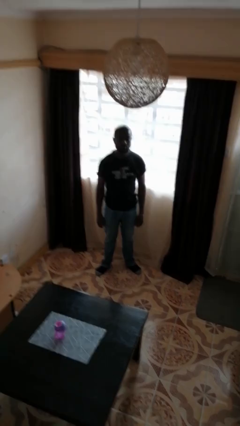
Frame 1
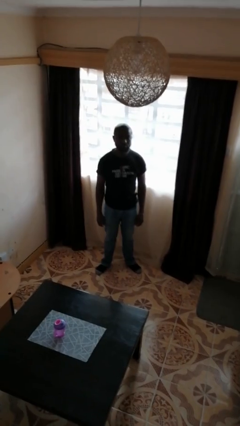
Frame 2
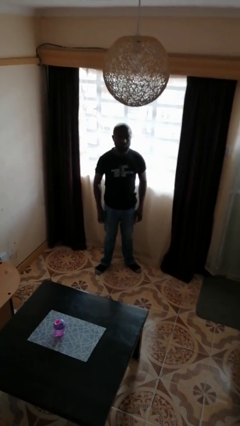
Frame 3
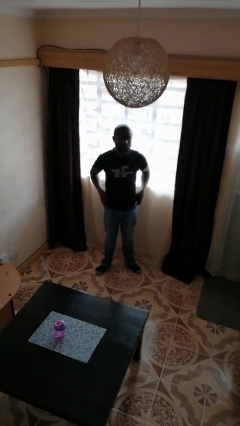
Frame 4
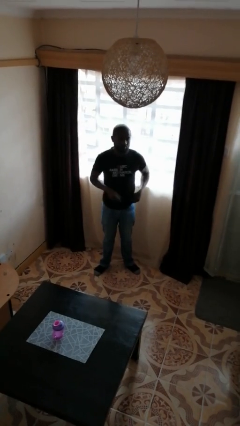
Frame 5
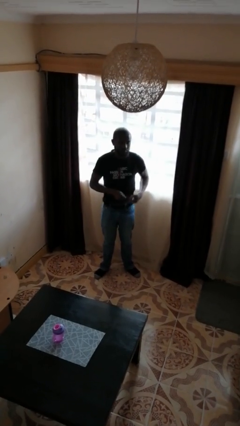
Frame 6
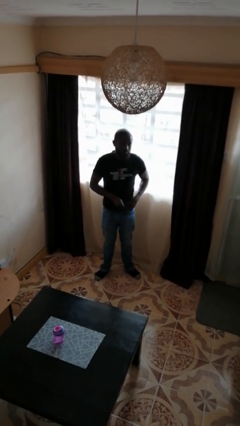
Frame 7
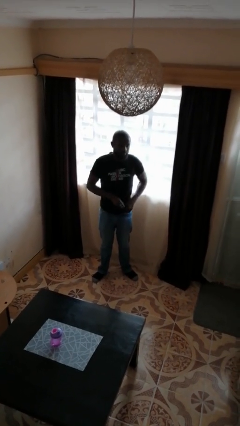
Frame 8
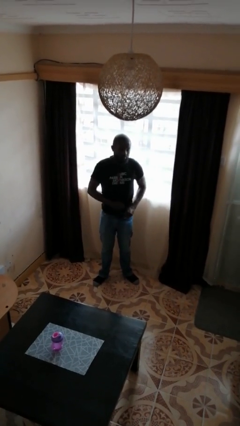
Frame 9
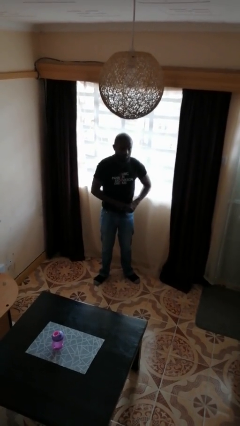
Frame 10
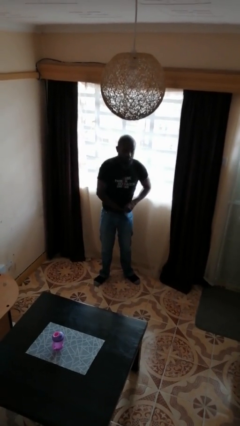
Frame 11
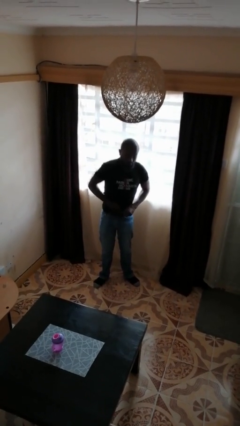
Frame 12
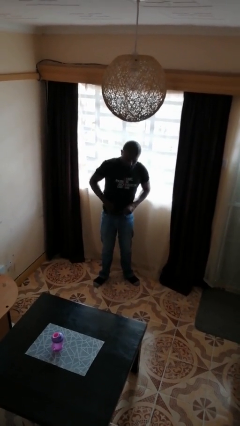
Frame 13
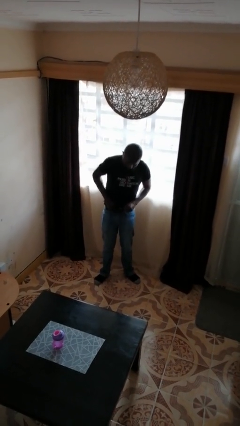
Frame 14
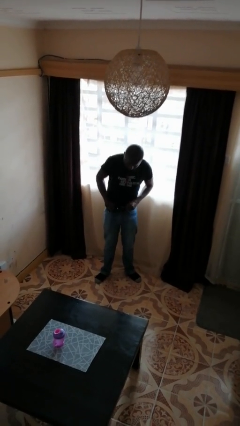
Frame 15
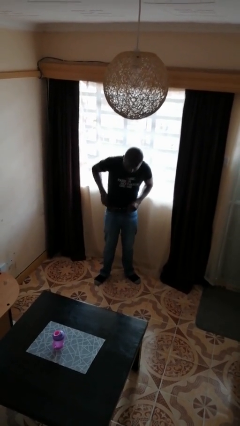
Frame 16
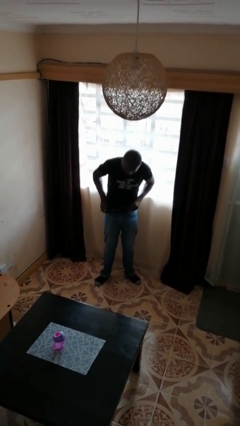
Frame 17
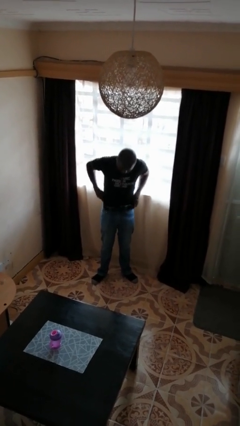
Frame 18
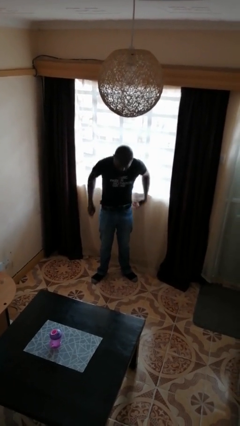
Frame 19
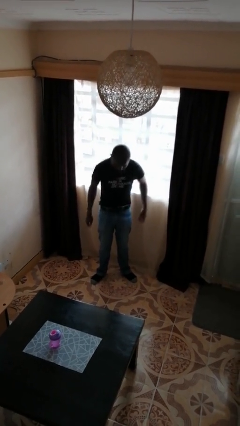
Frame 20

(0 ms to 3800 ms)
person tucks in shirt

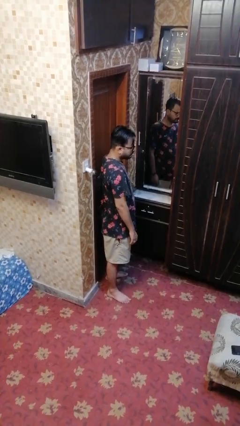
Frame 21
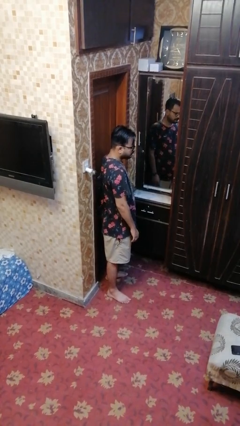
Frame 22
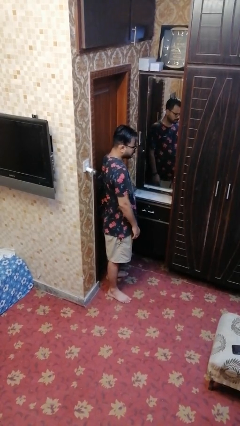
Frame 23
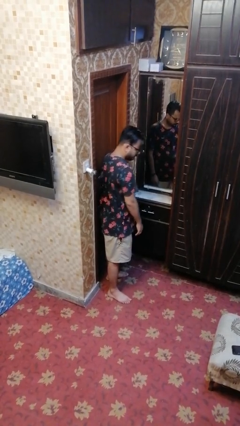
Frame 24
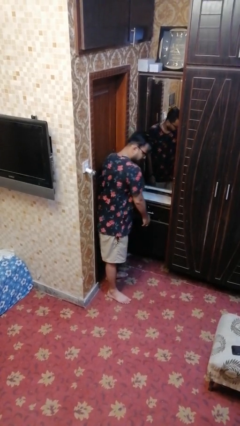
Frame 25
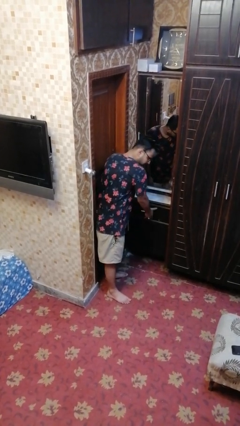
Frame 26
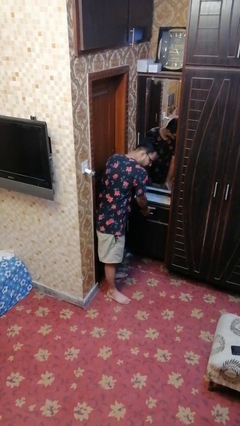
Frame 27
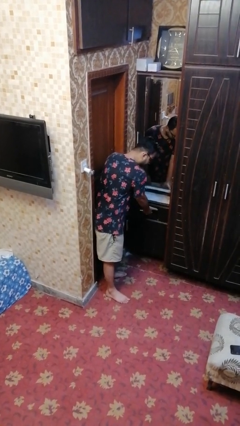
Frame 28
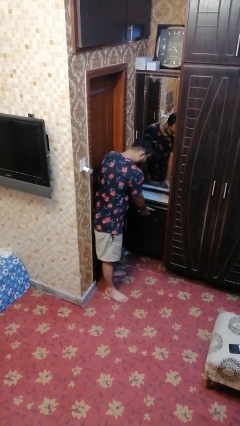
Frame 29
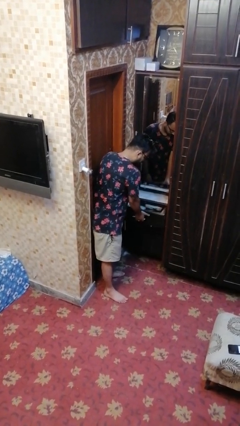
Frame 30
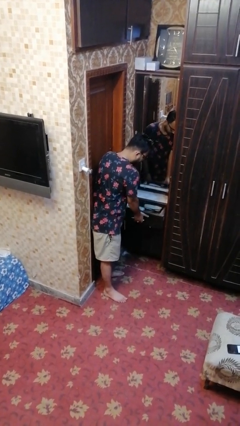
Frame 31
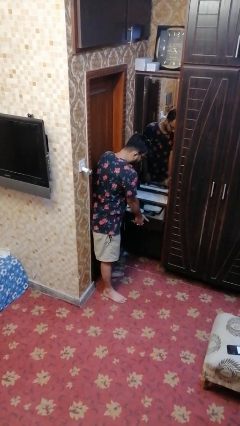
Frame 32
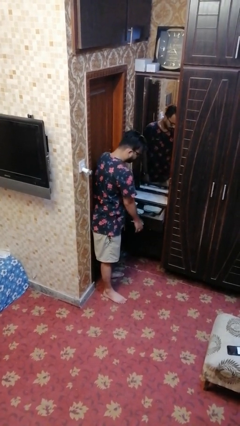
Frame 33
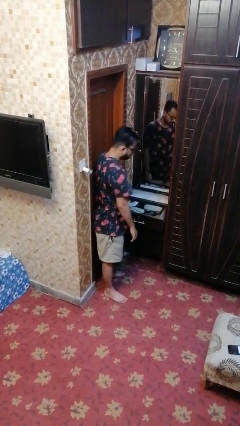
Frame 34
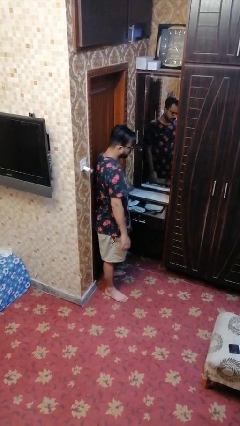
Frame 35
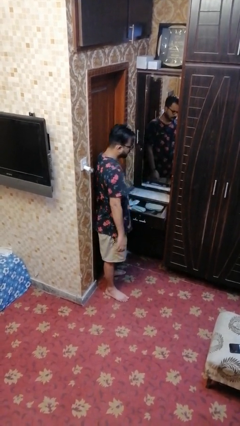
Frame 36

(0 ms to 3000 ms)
person opens dresser drawer

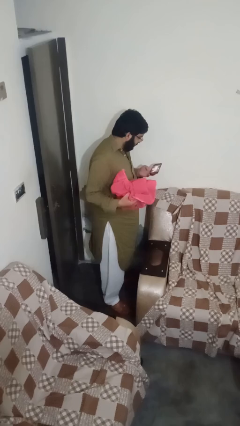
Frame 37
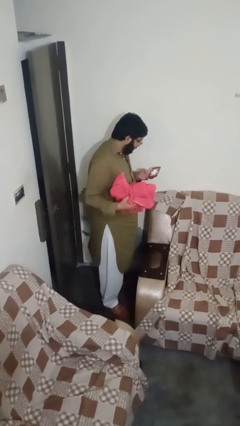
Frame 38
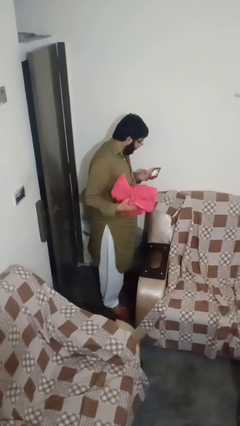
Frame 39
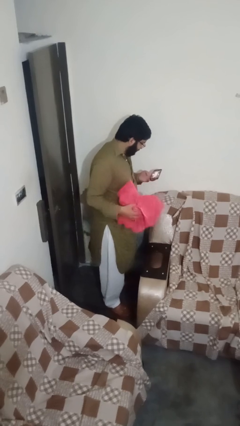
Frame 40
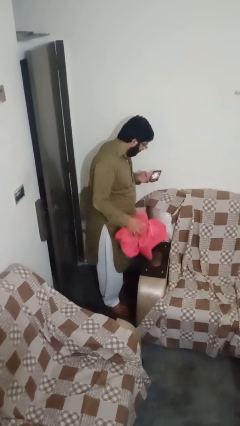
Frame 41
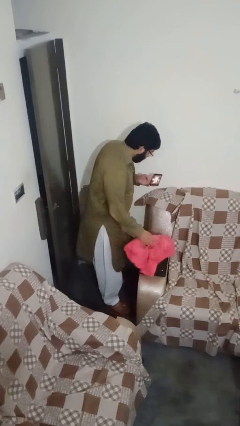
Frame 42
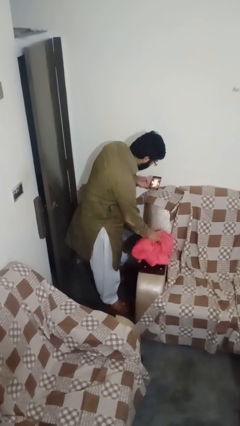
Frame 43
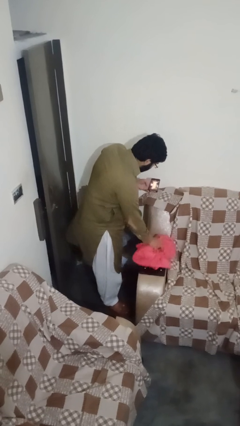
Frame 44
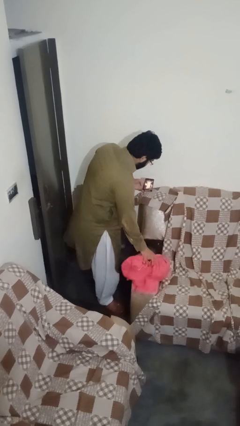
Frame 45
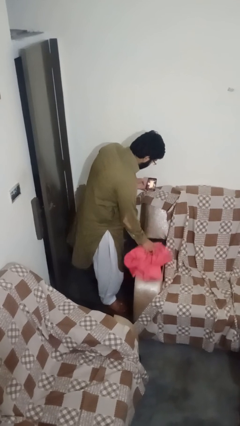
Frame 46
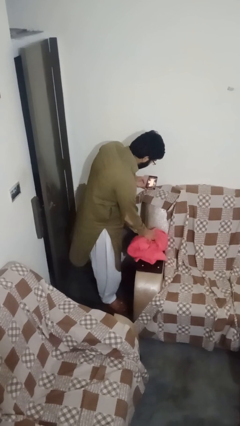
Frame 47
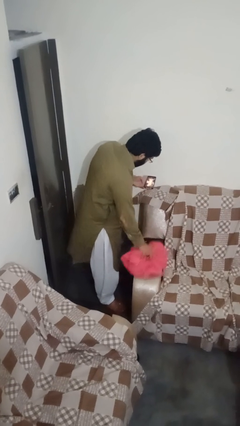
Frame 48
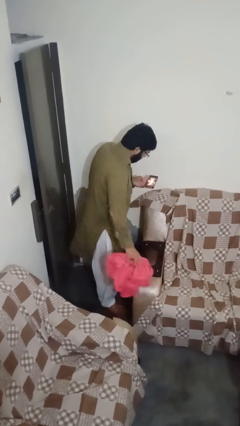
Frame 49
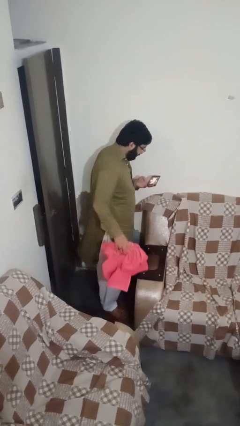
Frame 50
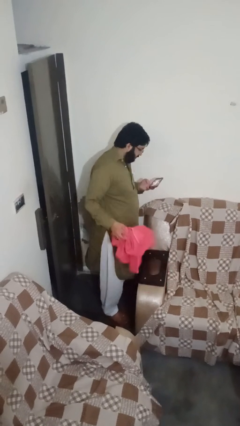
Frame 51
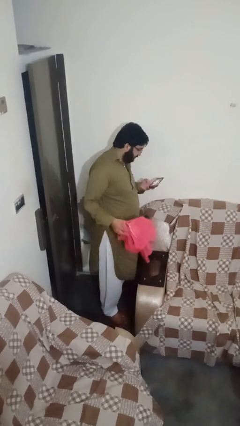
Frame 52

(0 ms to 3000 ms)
person dusts furniture

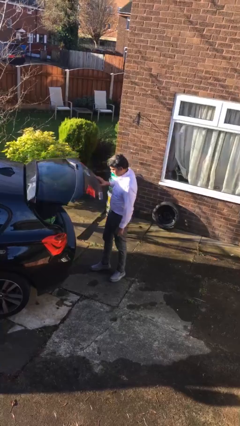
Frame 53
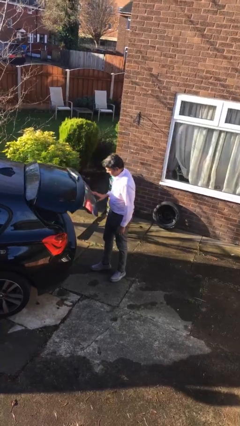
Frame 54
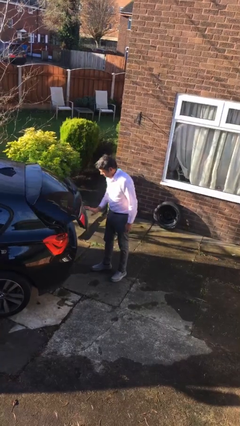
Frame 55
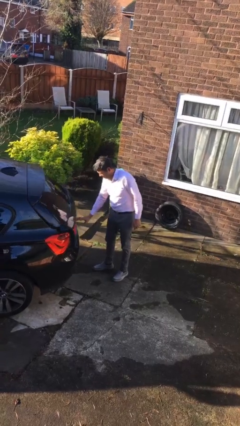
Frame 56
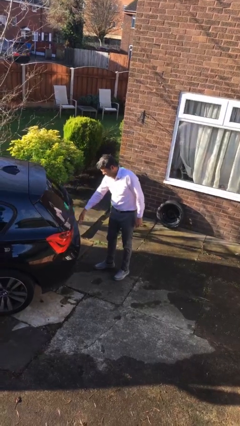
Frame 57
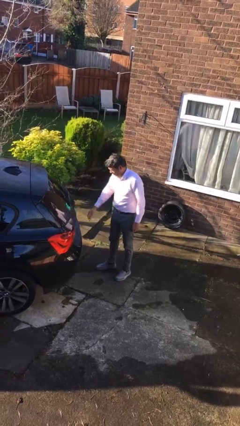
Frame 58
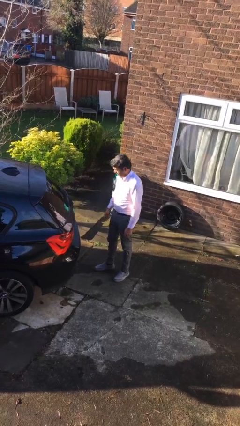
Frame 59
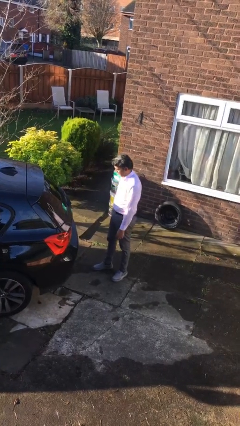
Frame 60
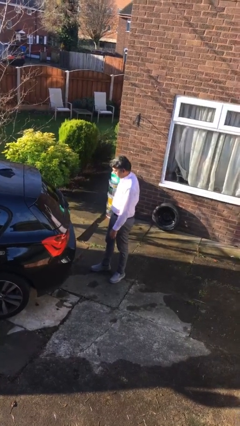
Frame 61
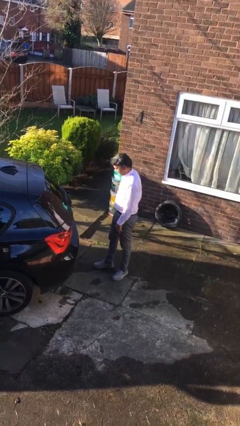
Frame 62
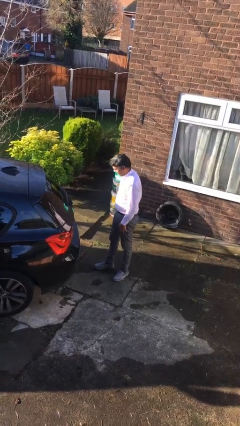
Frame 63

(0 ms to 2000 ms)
person closes car trunk

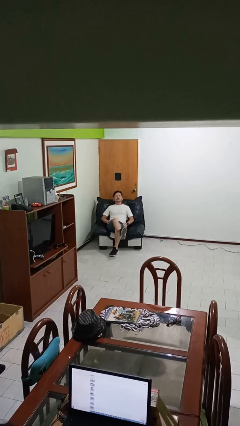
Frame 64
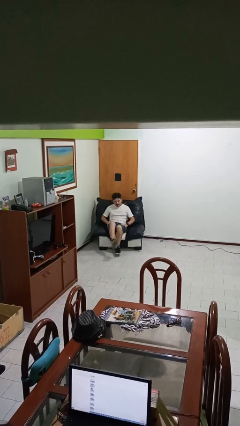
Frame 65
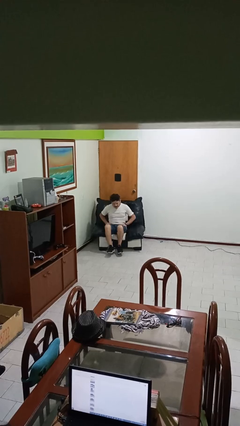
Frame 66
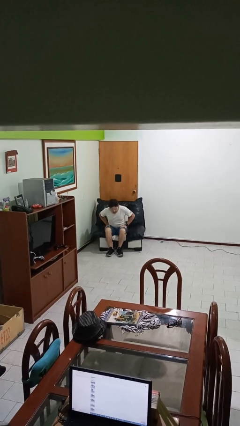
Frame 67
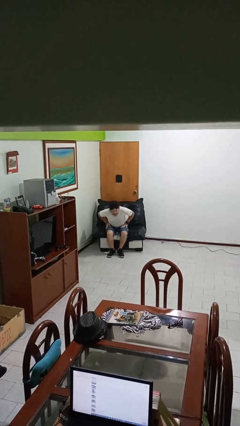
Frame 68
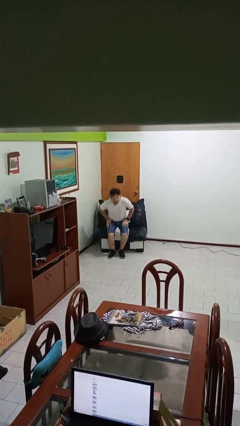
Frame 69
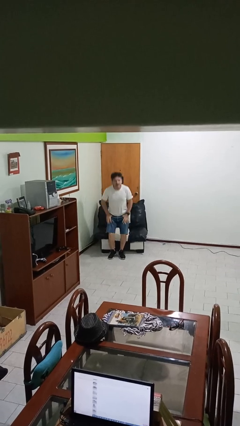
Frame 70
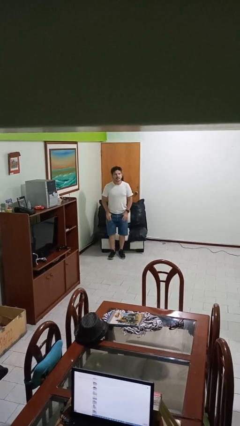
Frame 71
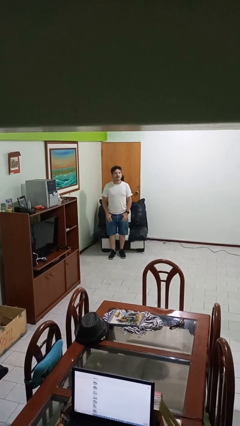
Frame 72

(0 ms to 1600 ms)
person stands up

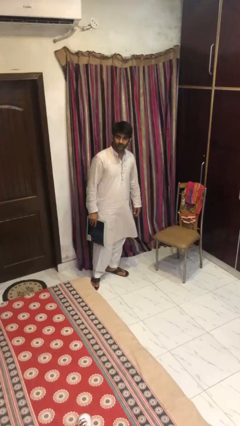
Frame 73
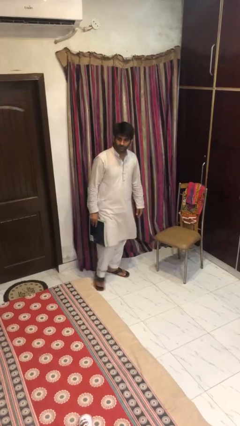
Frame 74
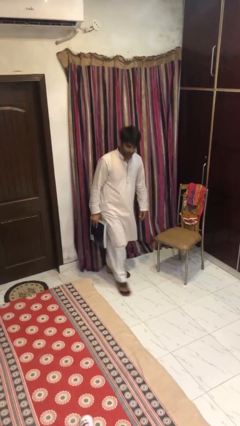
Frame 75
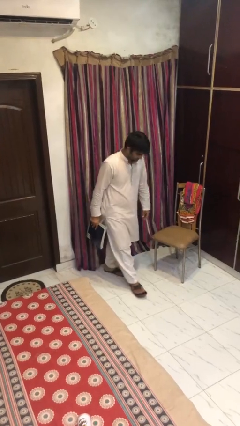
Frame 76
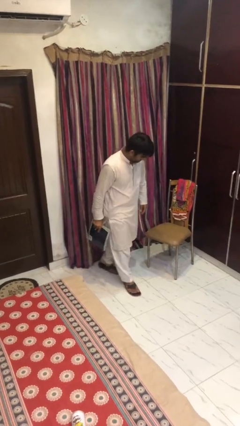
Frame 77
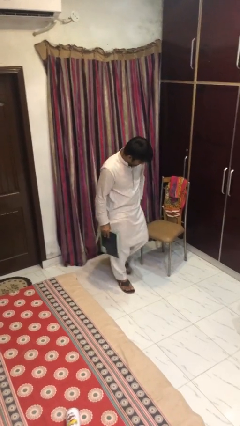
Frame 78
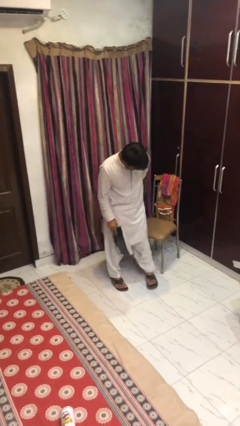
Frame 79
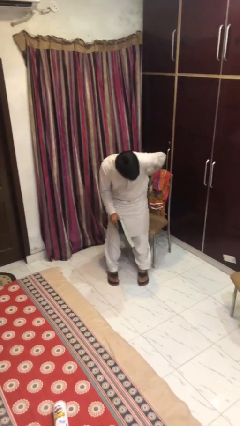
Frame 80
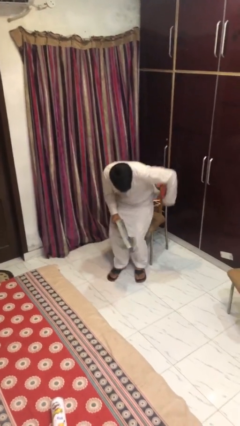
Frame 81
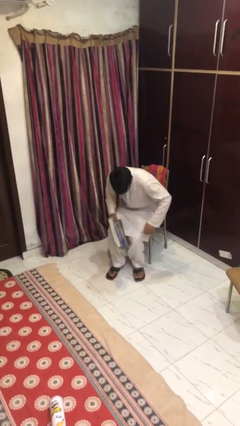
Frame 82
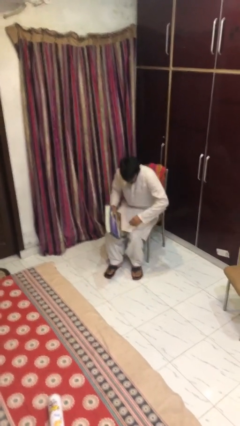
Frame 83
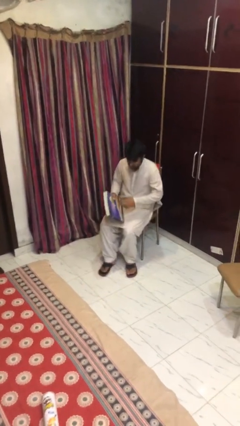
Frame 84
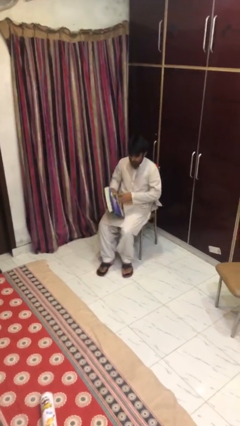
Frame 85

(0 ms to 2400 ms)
person sits down

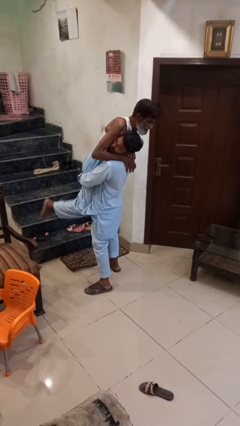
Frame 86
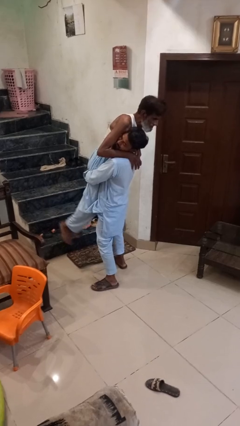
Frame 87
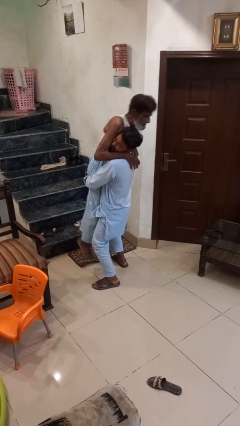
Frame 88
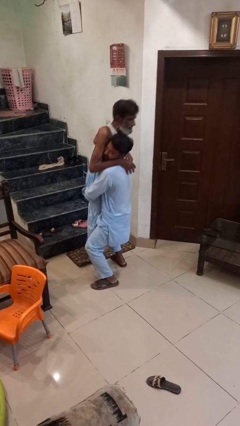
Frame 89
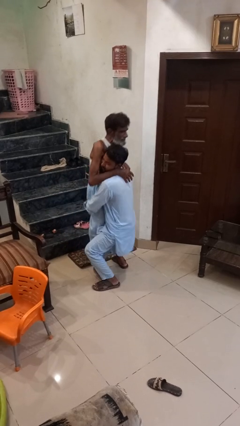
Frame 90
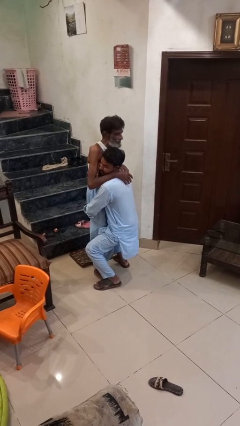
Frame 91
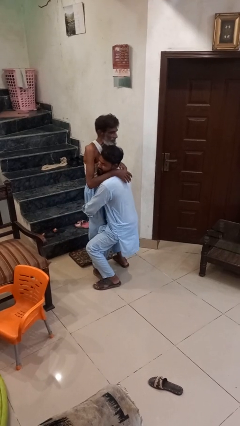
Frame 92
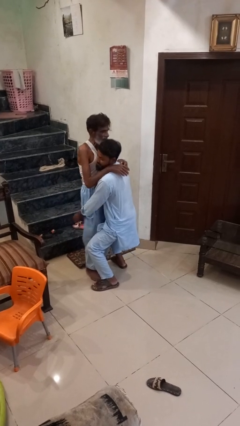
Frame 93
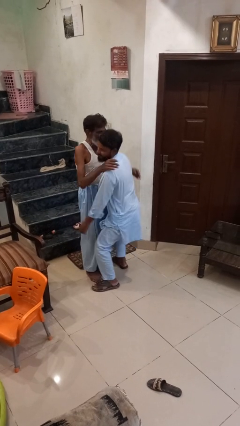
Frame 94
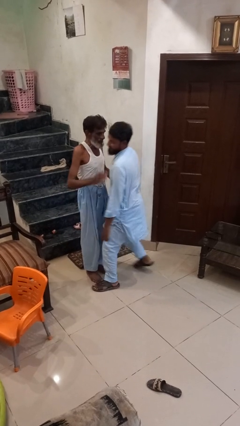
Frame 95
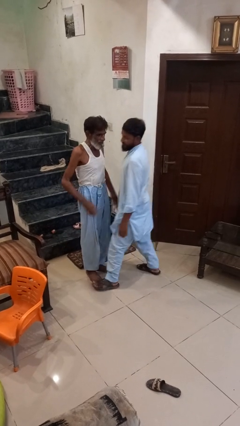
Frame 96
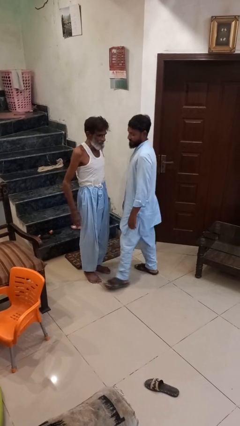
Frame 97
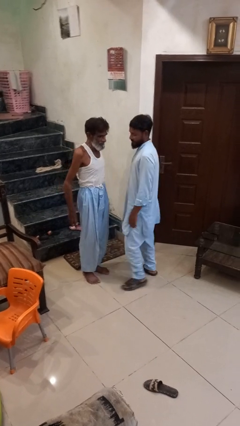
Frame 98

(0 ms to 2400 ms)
person puts down person
